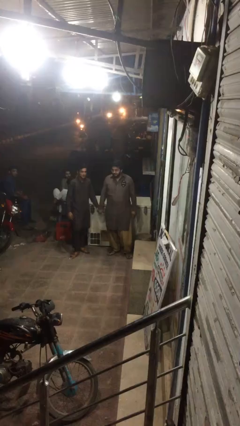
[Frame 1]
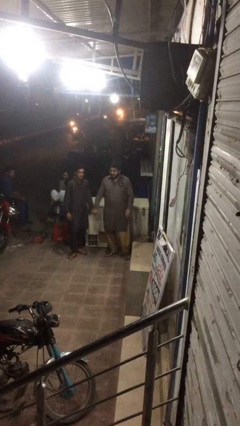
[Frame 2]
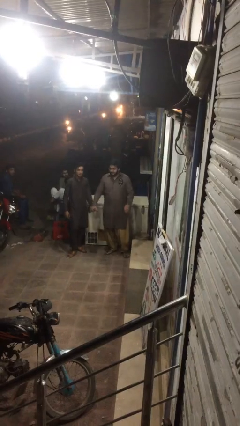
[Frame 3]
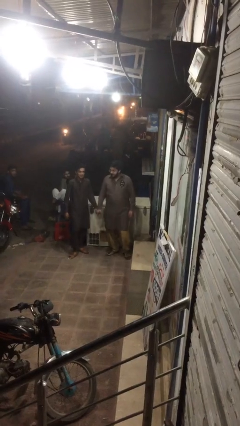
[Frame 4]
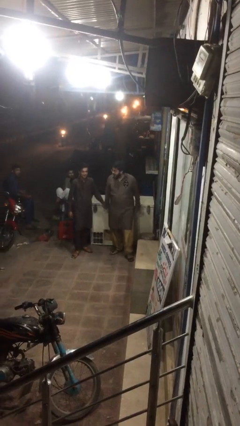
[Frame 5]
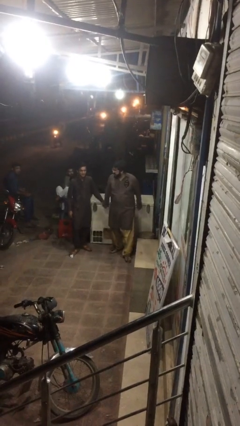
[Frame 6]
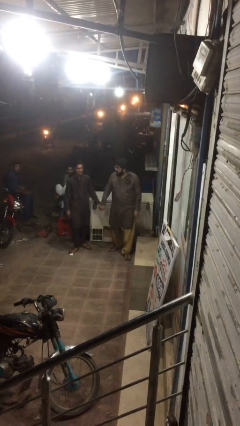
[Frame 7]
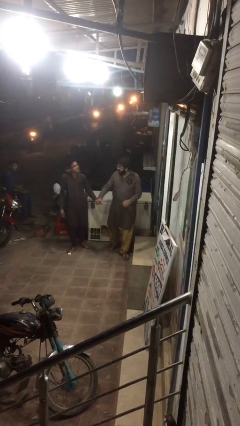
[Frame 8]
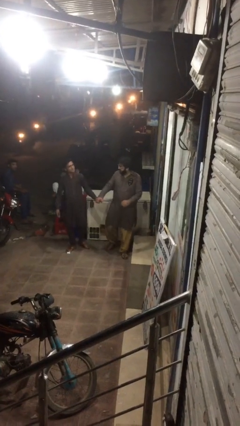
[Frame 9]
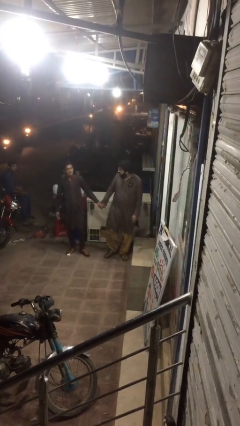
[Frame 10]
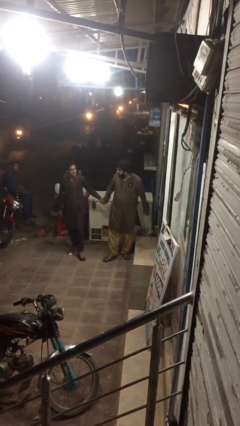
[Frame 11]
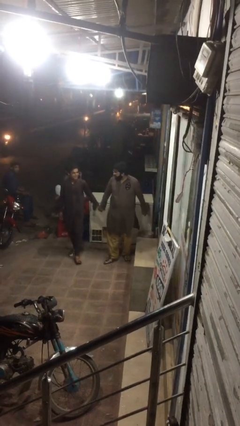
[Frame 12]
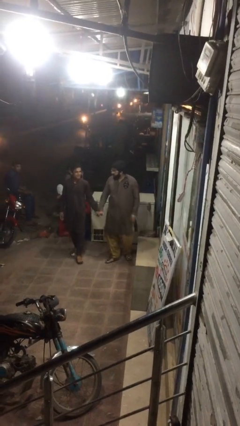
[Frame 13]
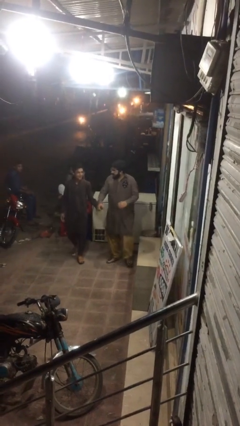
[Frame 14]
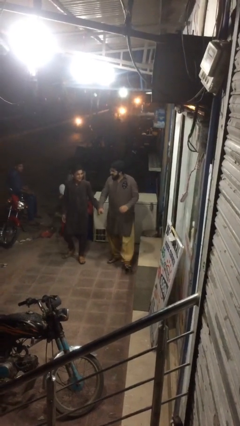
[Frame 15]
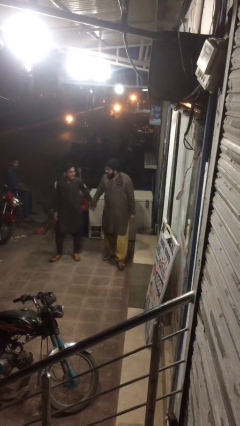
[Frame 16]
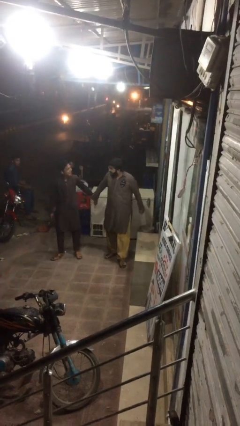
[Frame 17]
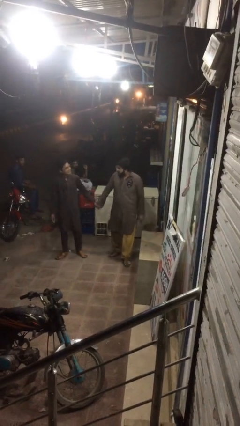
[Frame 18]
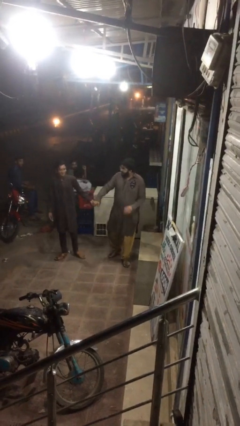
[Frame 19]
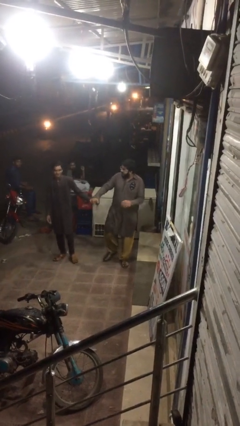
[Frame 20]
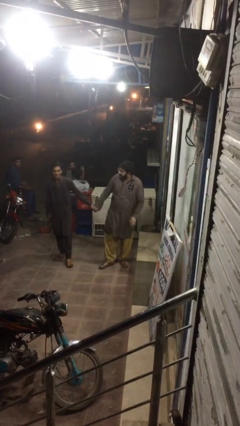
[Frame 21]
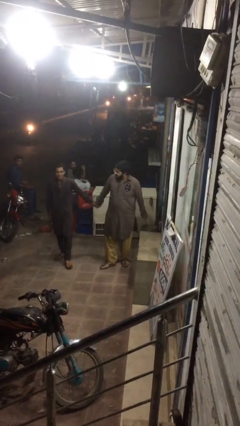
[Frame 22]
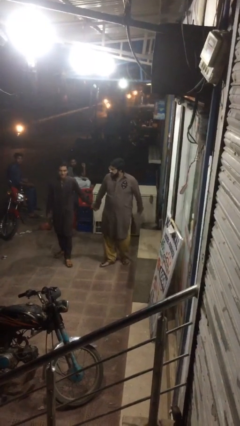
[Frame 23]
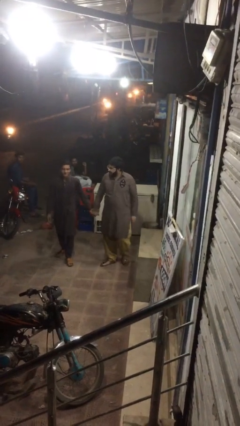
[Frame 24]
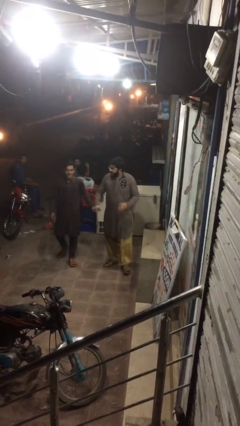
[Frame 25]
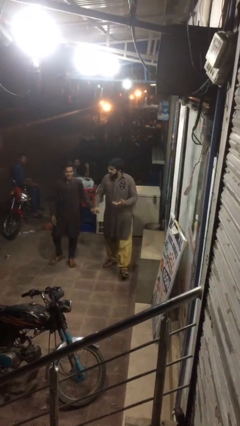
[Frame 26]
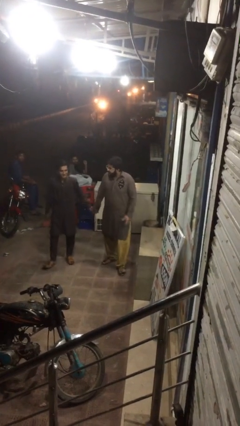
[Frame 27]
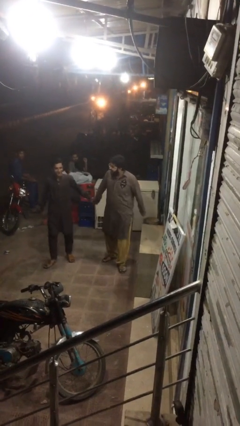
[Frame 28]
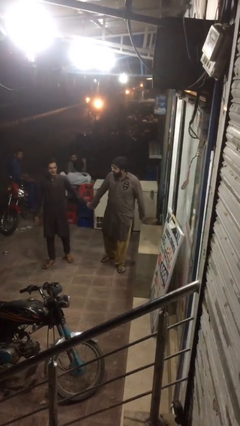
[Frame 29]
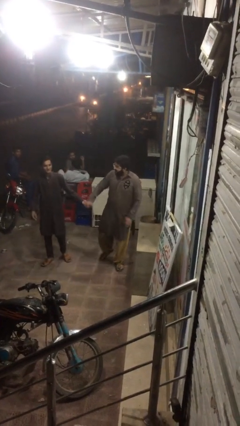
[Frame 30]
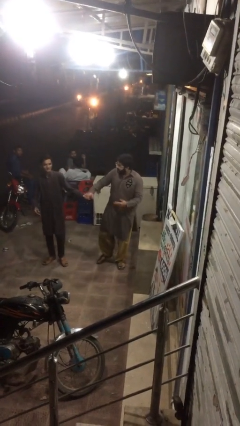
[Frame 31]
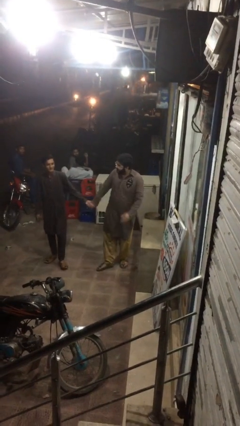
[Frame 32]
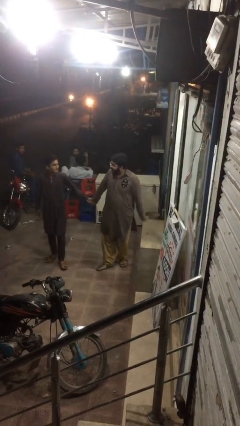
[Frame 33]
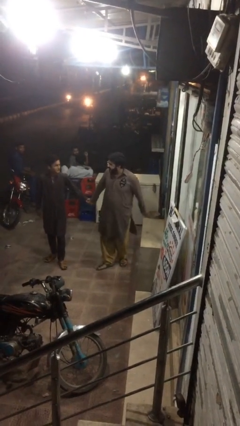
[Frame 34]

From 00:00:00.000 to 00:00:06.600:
person holds hand

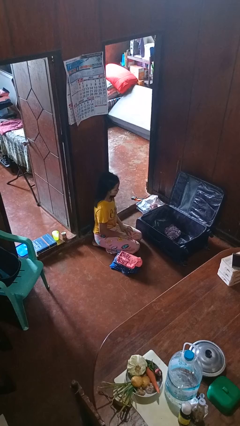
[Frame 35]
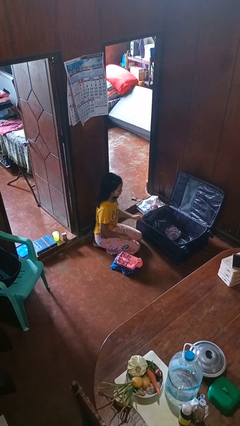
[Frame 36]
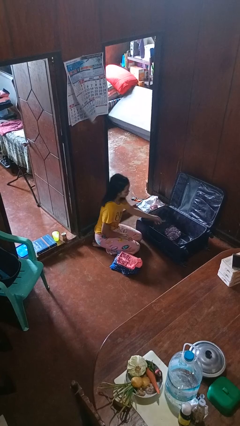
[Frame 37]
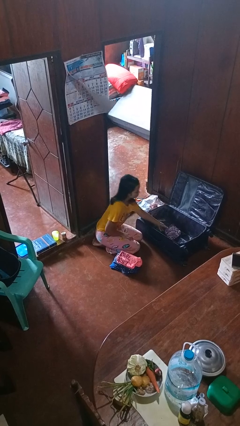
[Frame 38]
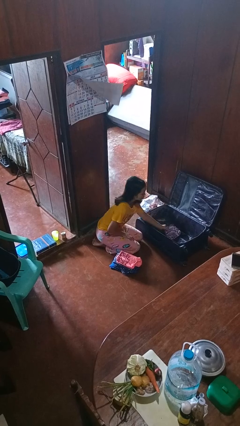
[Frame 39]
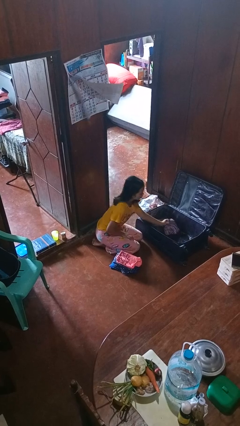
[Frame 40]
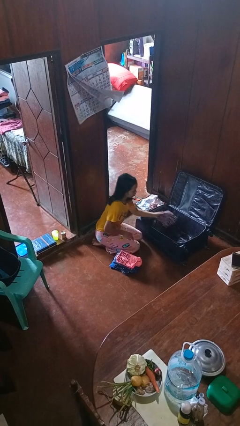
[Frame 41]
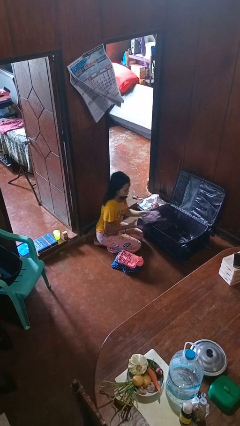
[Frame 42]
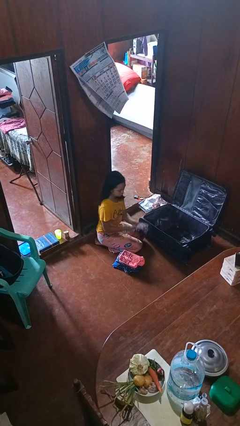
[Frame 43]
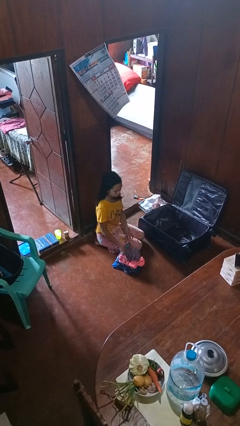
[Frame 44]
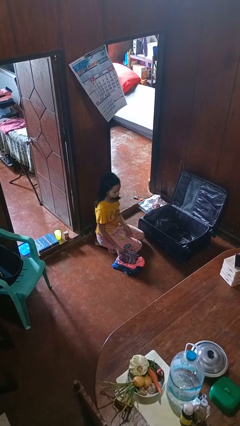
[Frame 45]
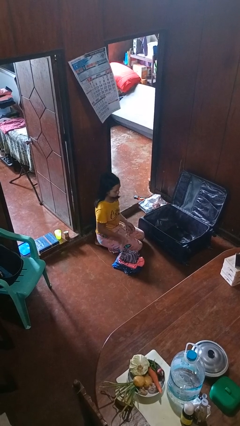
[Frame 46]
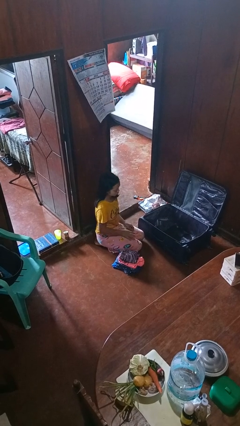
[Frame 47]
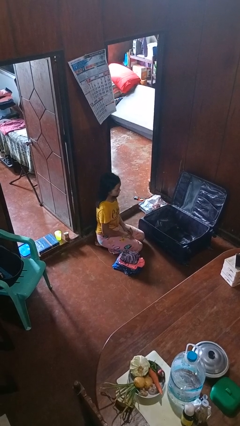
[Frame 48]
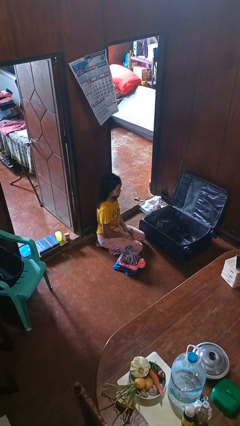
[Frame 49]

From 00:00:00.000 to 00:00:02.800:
person unloads clothes from suitcase

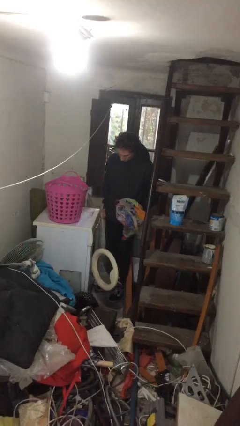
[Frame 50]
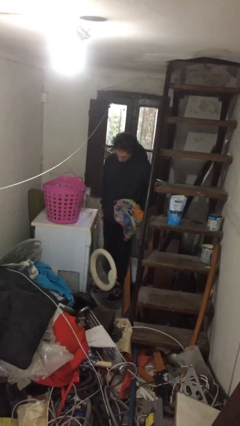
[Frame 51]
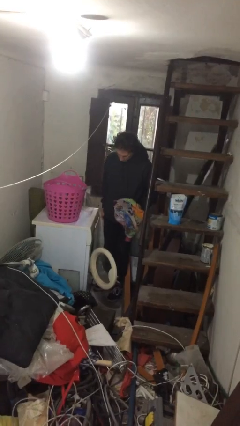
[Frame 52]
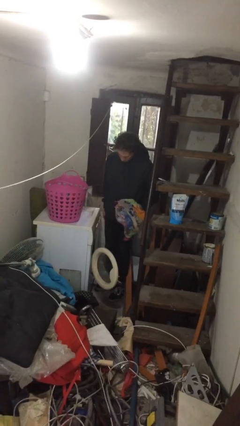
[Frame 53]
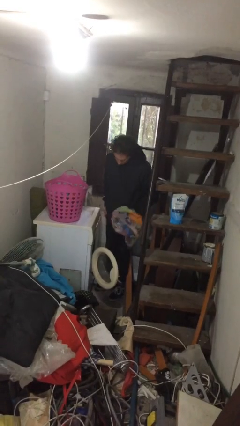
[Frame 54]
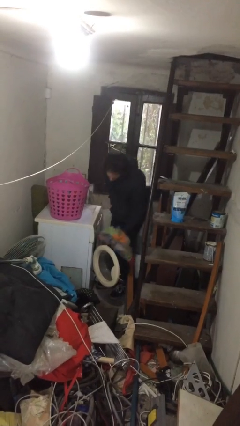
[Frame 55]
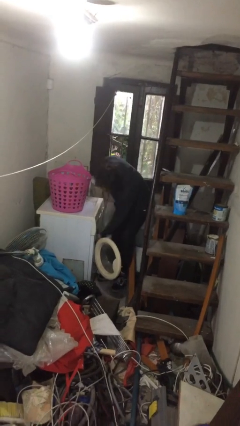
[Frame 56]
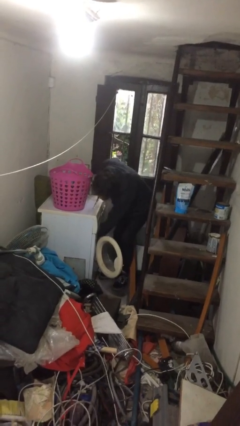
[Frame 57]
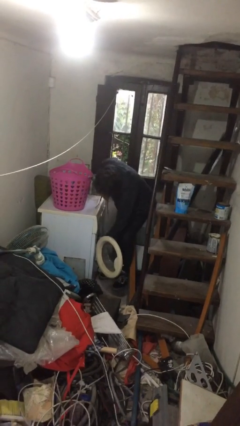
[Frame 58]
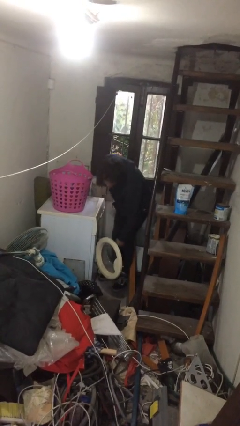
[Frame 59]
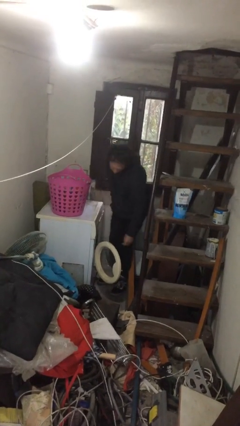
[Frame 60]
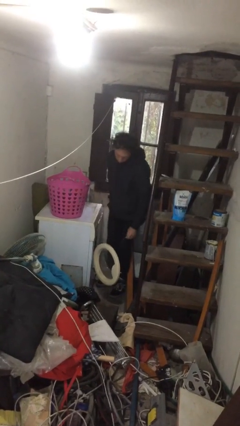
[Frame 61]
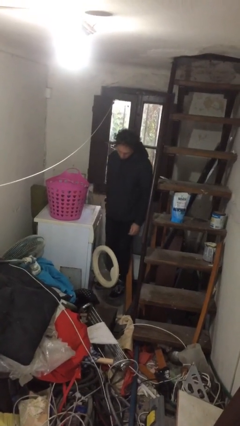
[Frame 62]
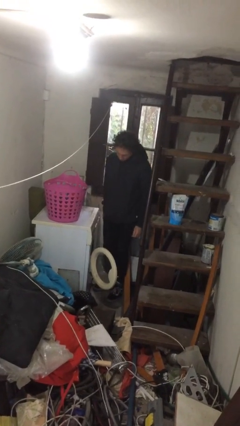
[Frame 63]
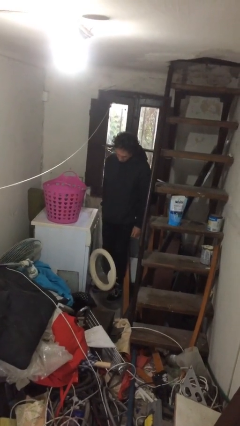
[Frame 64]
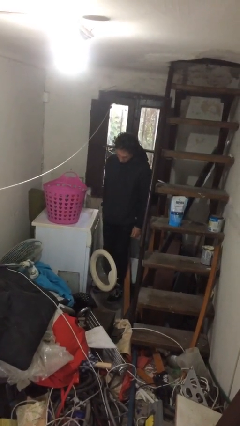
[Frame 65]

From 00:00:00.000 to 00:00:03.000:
person loads clotheswasher

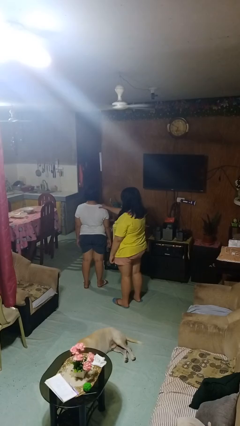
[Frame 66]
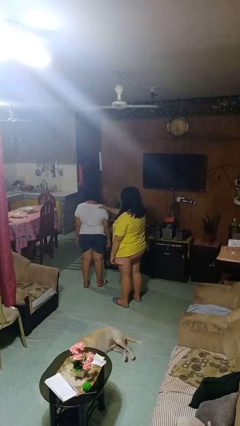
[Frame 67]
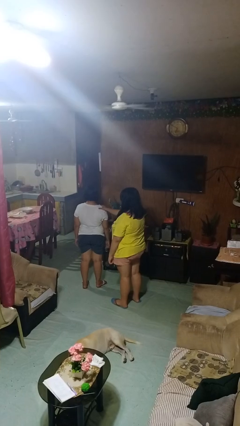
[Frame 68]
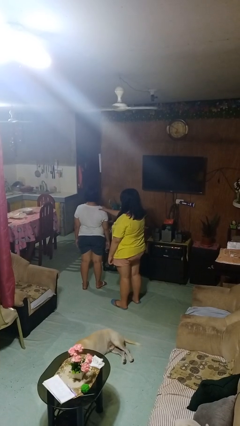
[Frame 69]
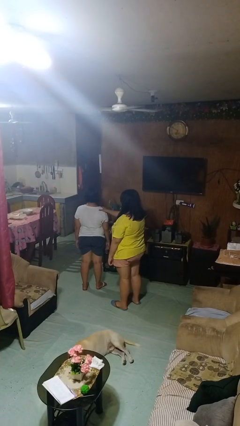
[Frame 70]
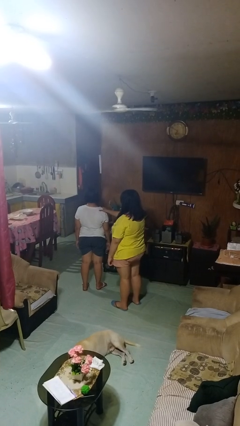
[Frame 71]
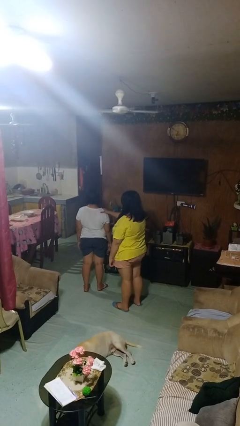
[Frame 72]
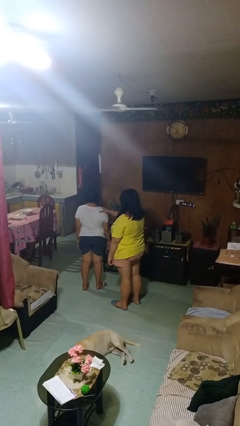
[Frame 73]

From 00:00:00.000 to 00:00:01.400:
person grabs person by shoulder

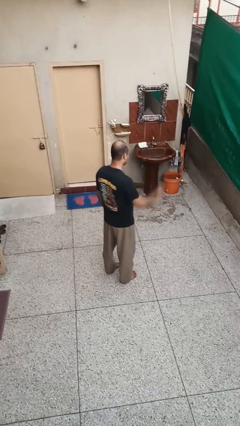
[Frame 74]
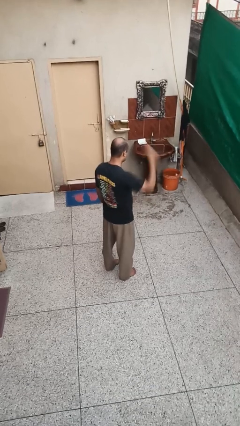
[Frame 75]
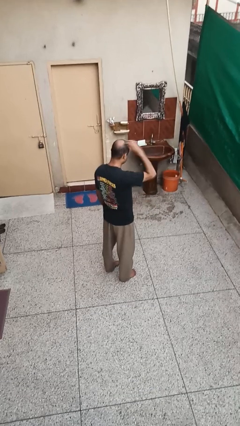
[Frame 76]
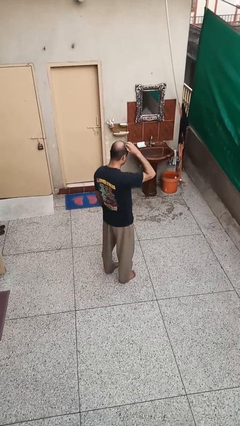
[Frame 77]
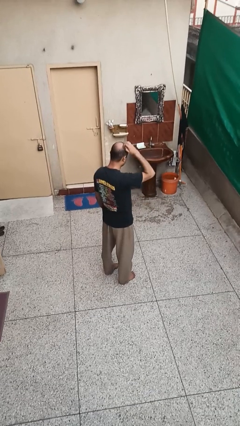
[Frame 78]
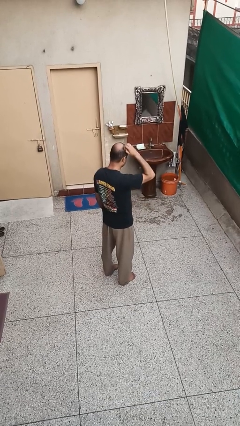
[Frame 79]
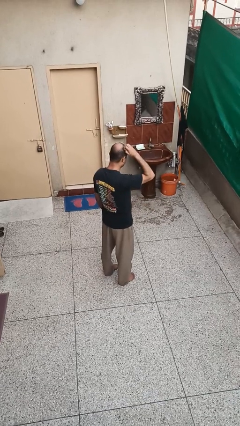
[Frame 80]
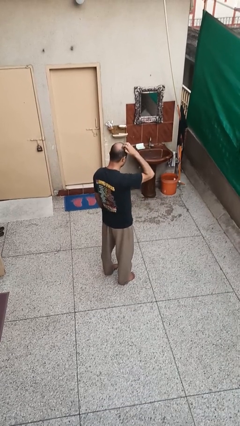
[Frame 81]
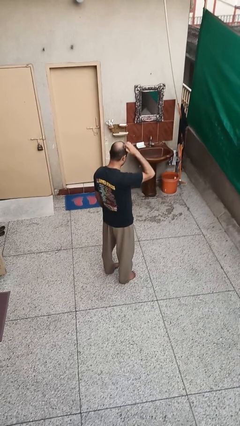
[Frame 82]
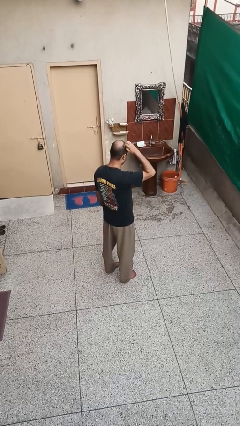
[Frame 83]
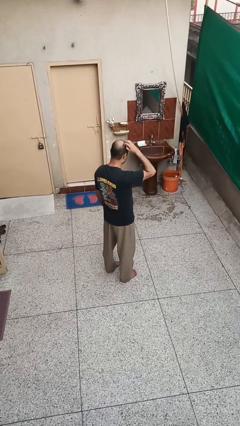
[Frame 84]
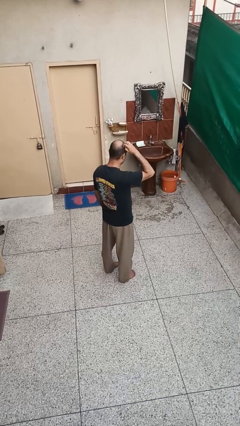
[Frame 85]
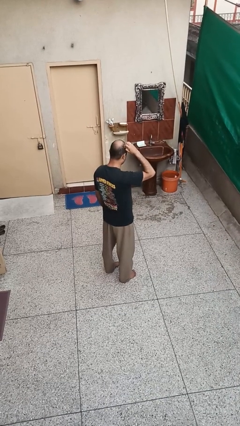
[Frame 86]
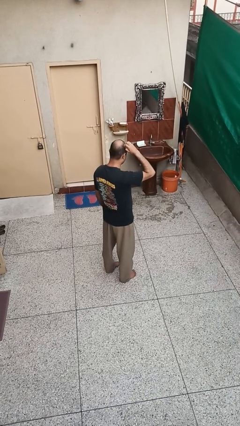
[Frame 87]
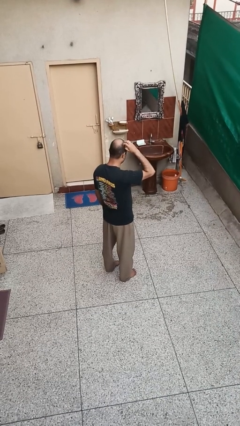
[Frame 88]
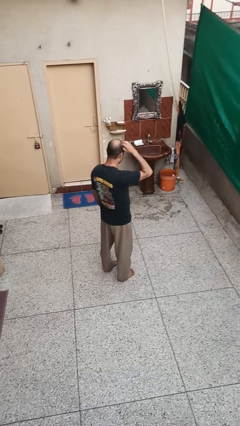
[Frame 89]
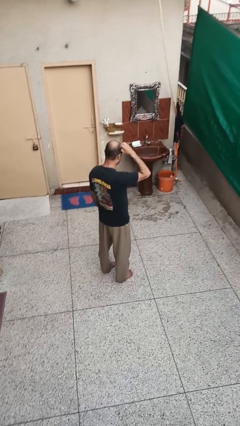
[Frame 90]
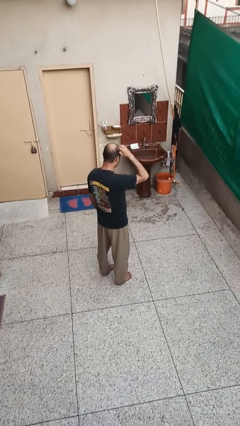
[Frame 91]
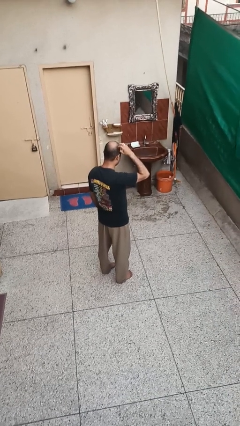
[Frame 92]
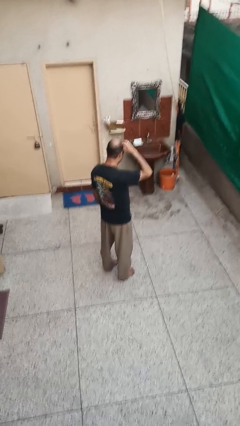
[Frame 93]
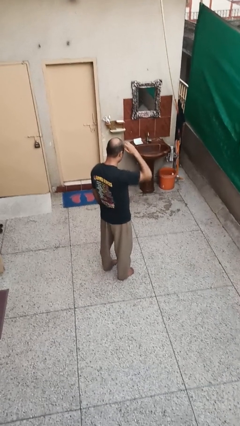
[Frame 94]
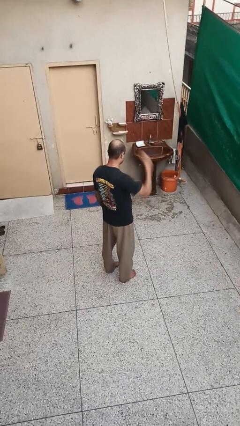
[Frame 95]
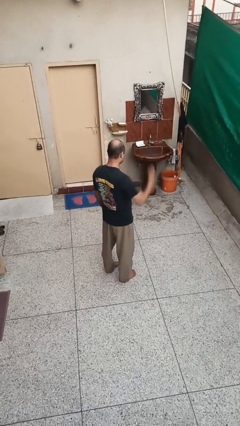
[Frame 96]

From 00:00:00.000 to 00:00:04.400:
person scratches face
